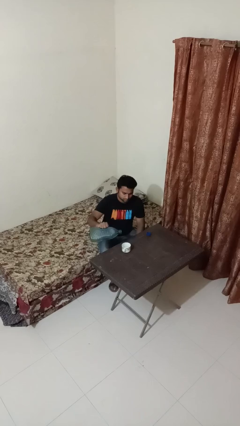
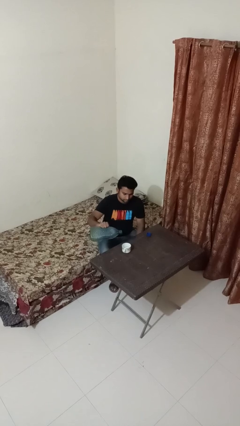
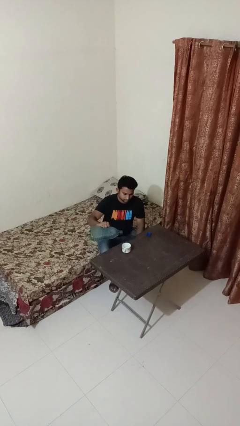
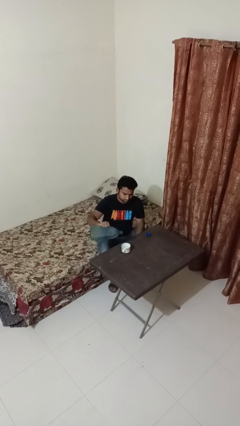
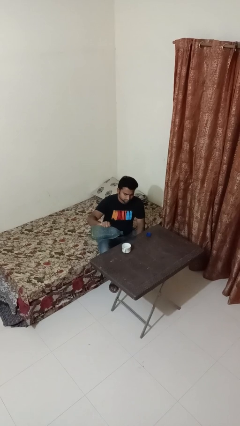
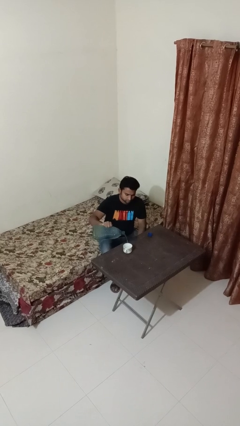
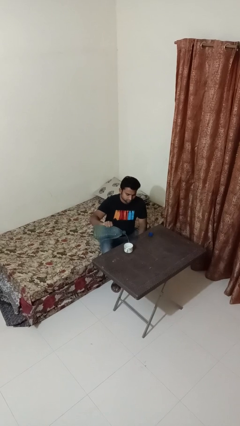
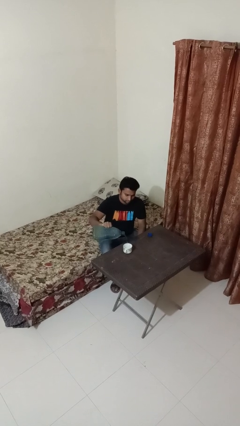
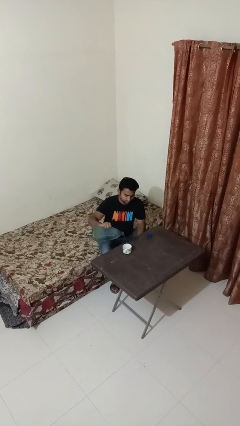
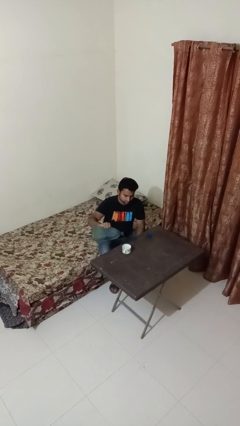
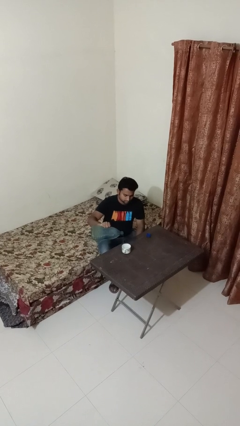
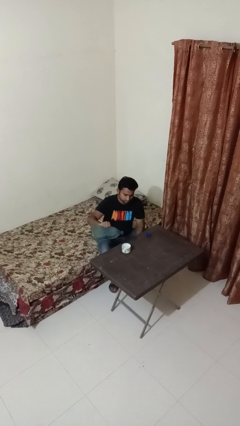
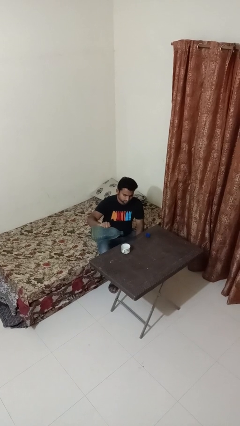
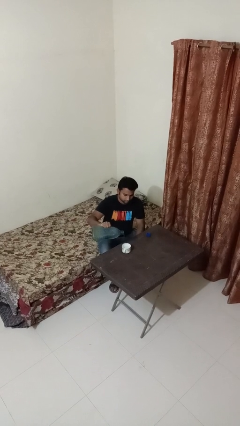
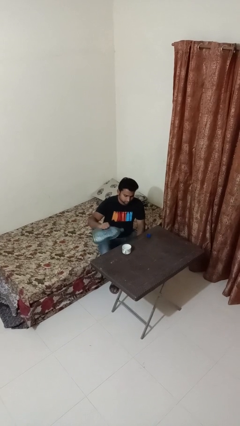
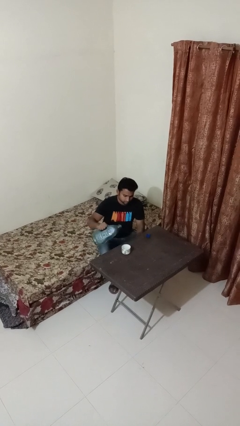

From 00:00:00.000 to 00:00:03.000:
person pours liquid into cup

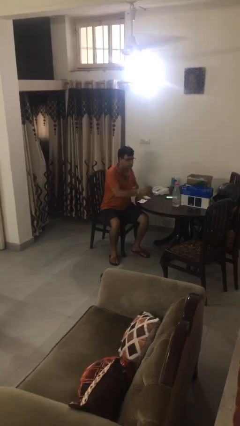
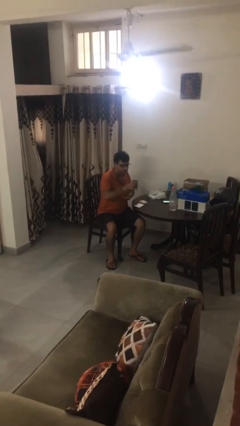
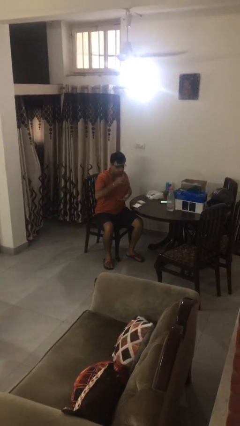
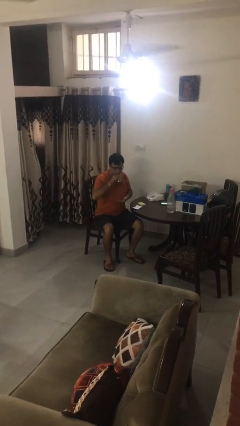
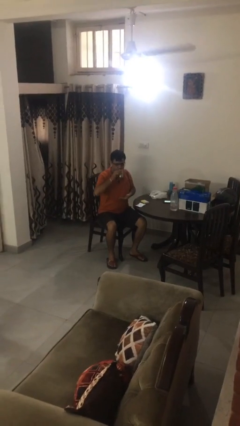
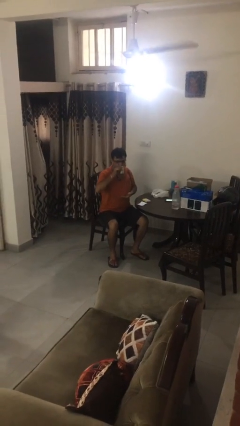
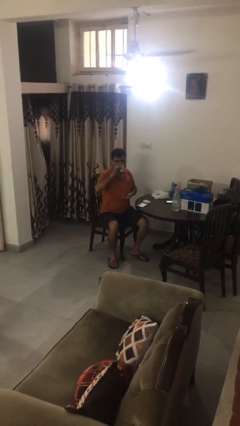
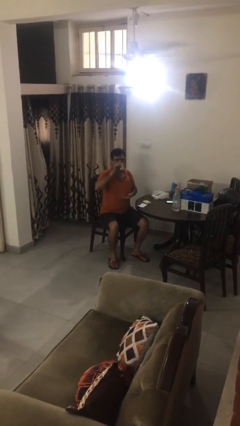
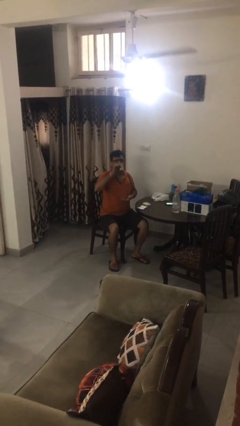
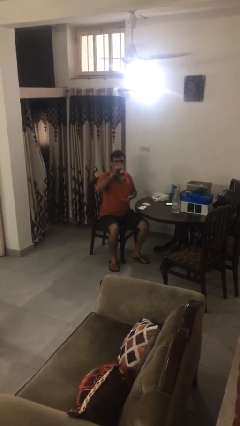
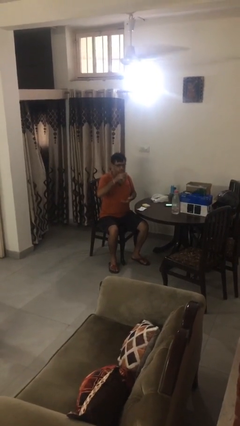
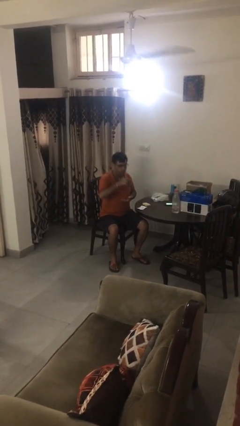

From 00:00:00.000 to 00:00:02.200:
person drinks from cup

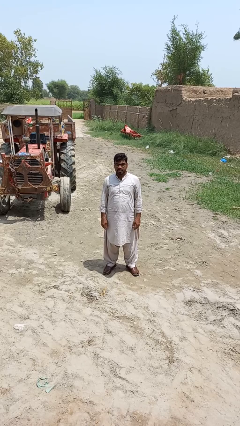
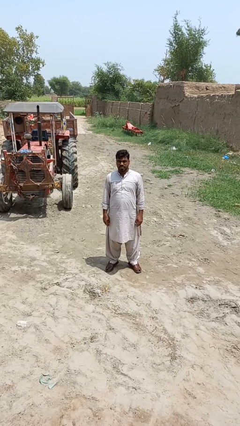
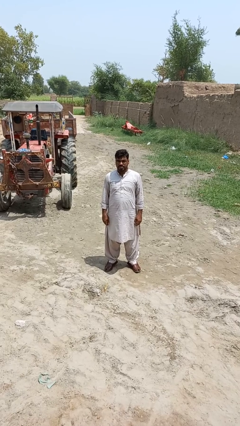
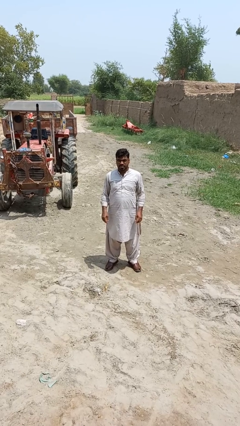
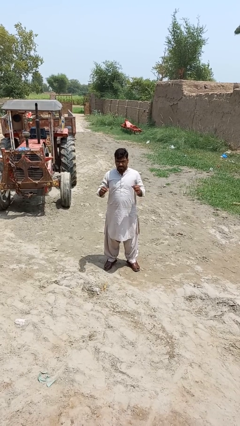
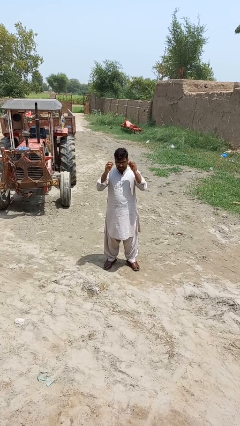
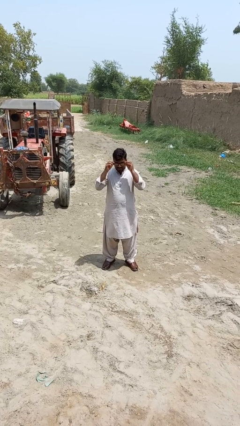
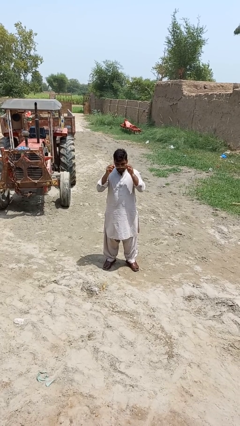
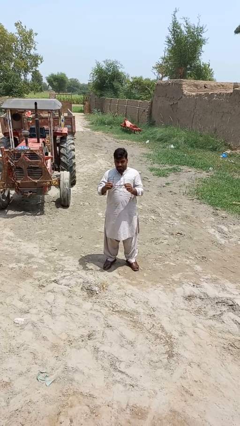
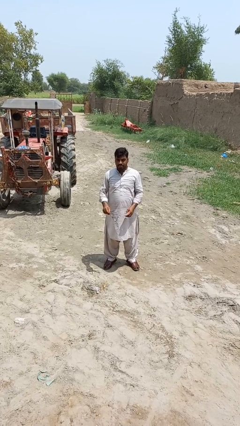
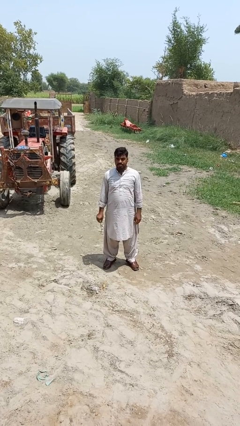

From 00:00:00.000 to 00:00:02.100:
person takes off glasses

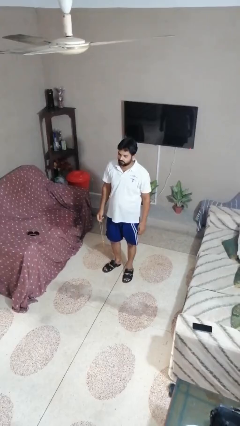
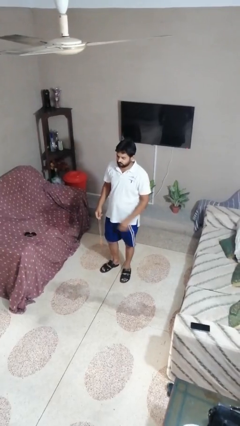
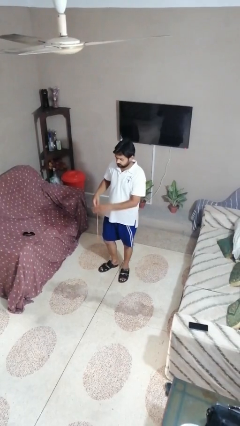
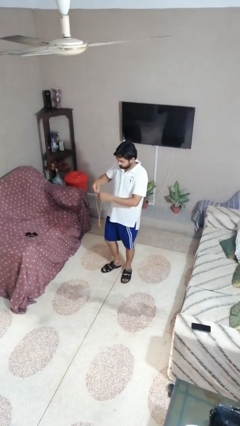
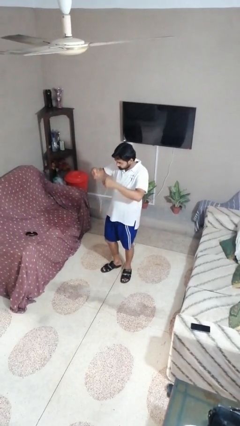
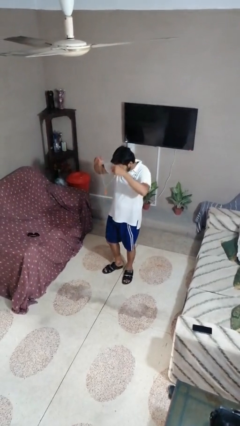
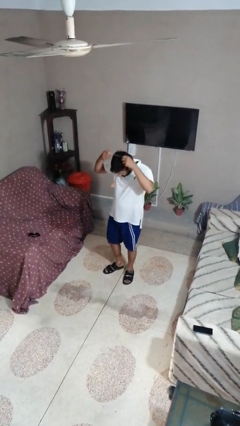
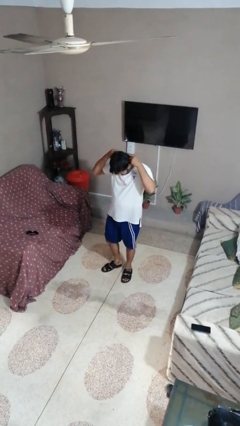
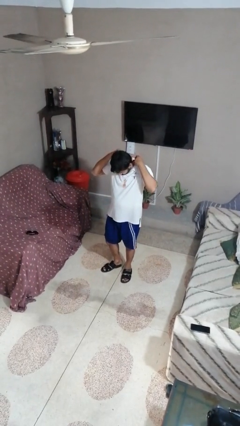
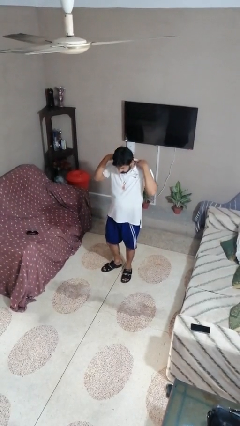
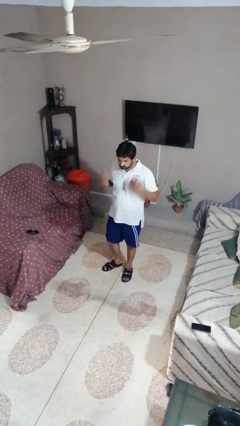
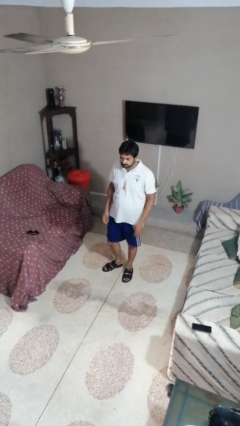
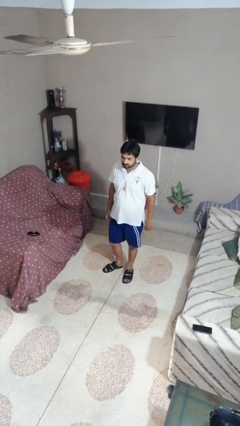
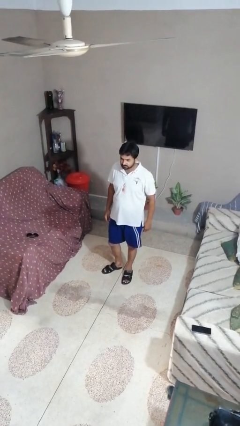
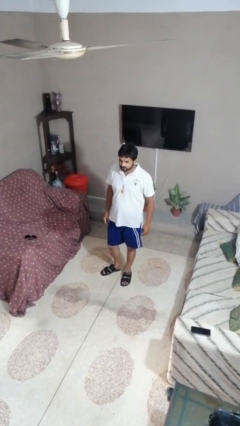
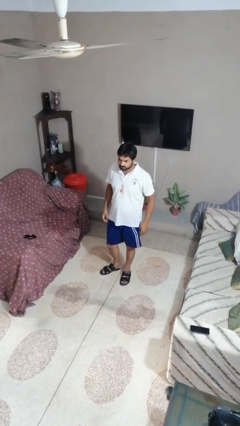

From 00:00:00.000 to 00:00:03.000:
person puts on necklace

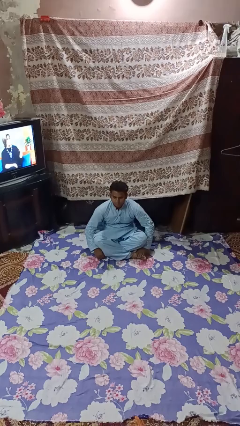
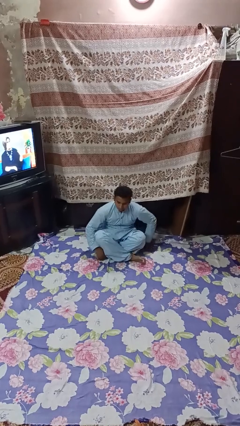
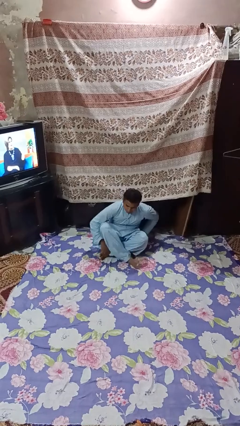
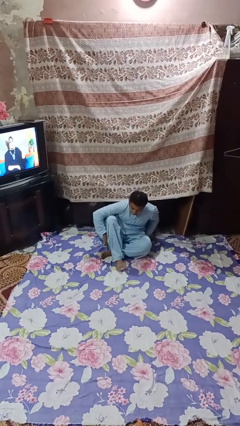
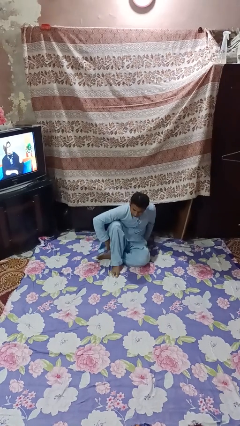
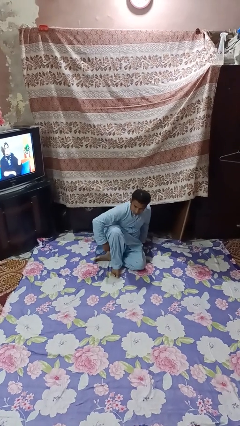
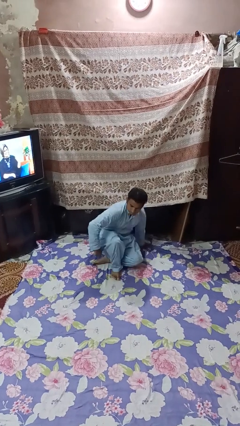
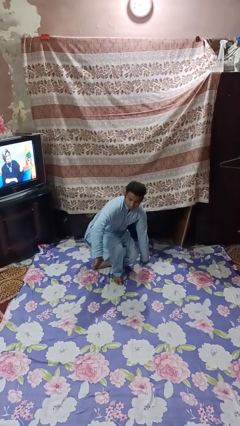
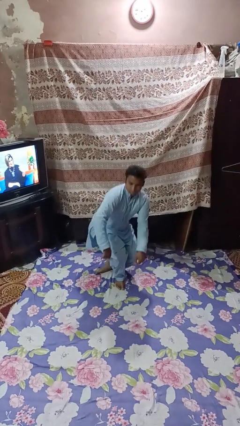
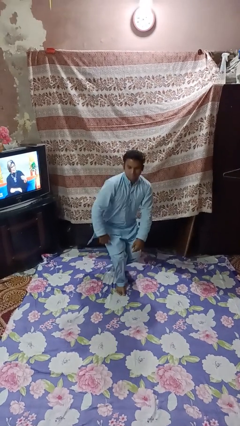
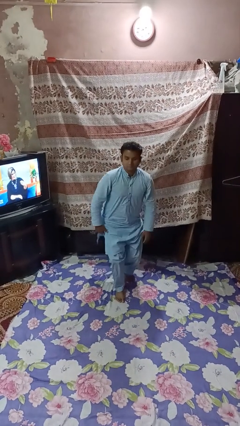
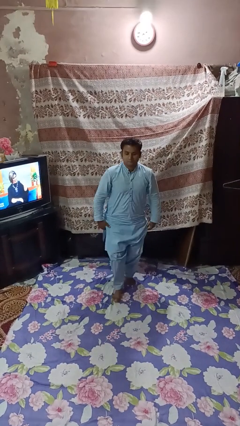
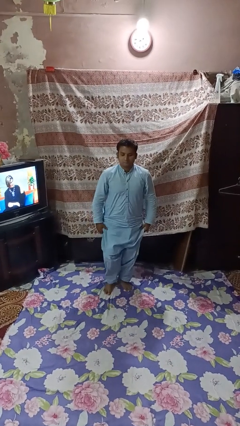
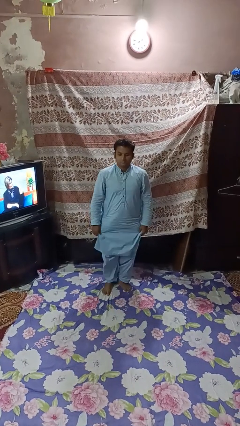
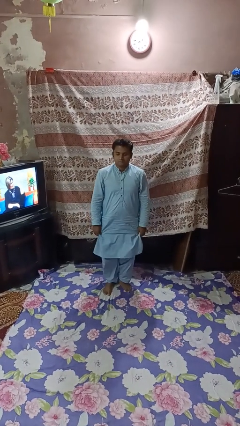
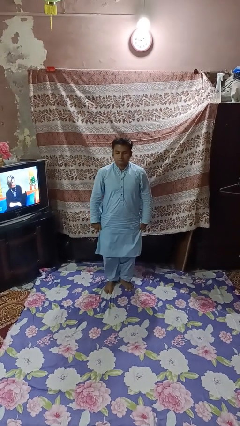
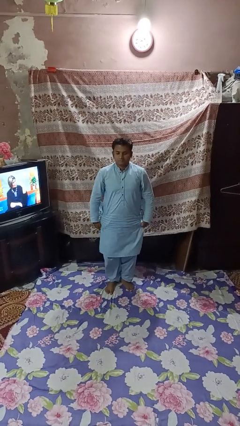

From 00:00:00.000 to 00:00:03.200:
person stands up from floor

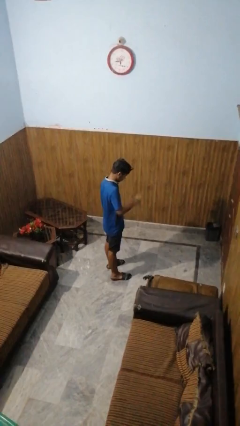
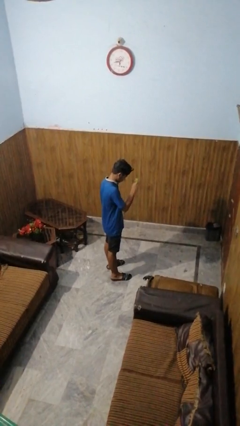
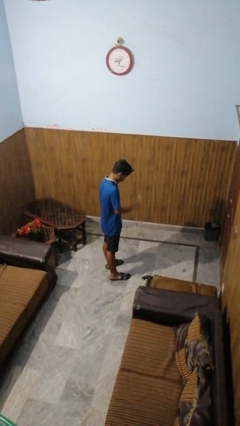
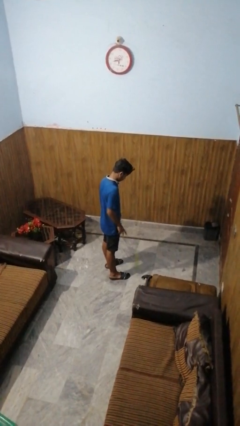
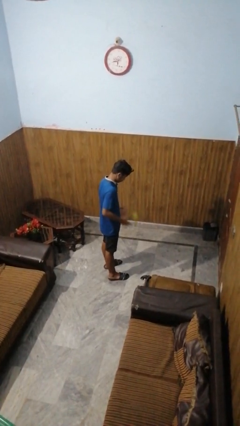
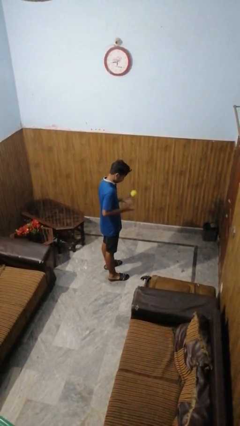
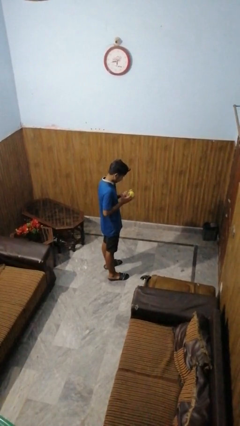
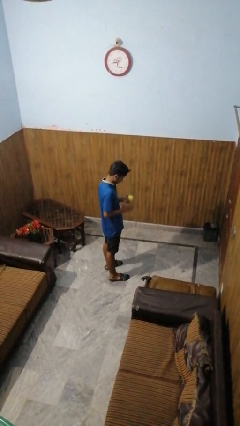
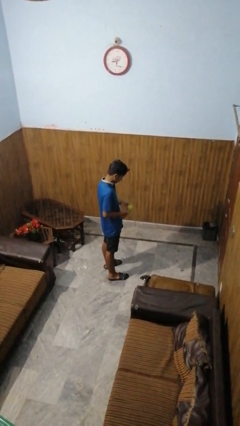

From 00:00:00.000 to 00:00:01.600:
person bounces ball on floor

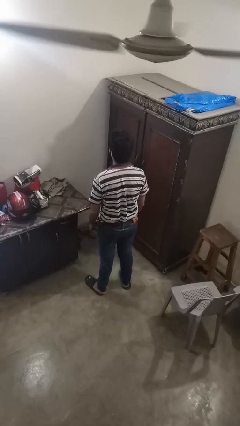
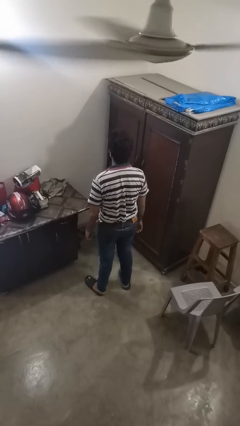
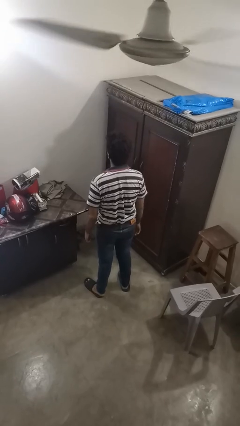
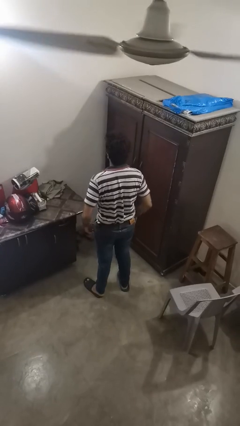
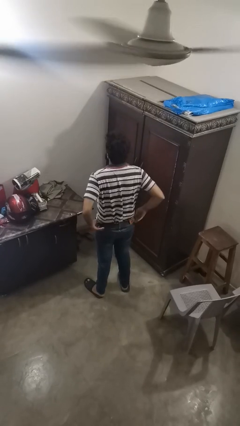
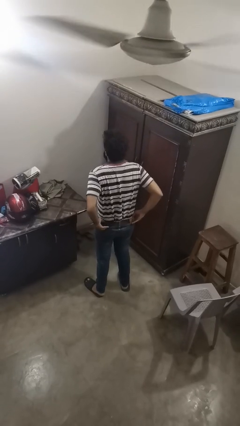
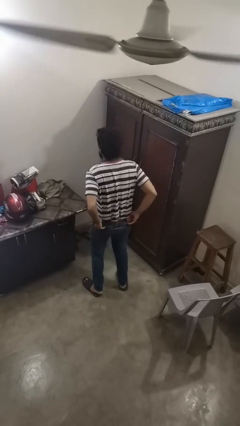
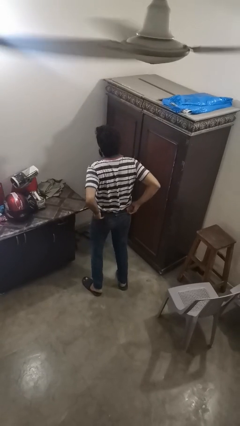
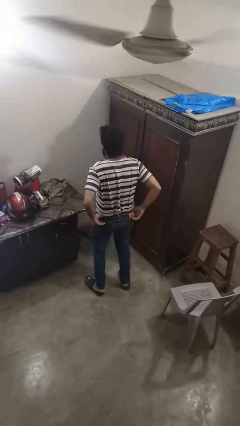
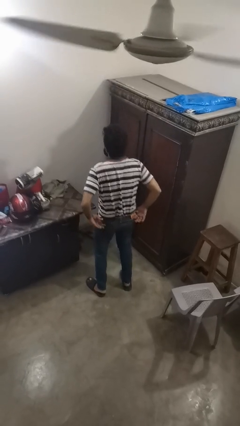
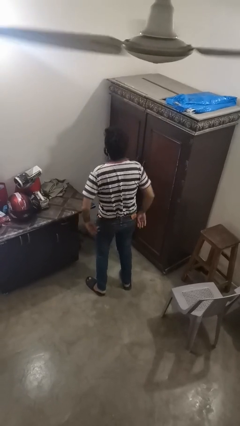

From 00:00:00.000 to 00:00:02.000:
person hikes up pants
